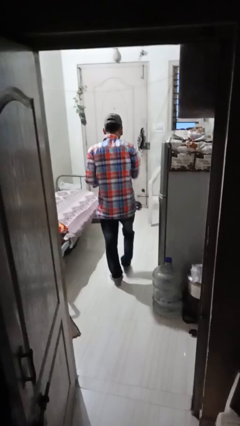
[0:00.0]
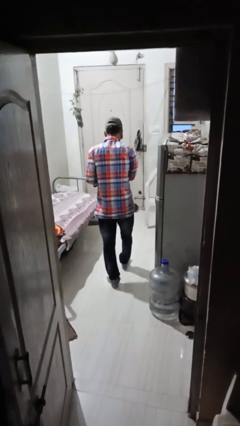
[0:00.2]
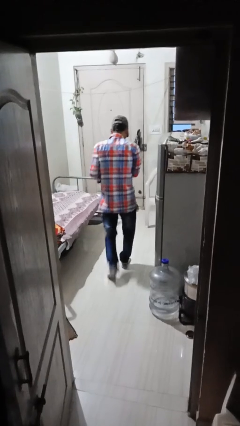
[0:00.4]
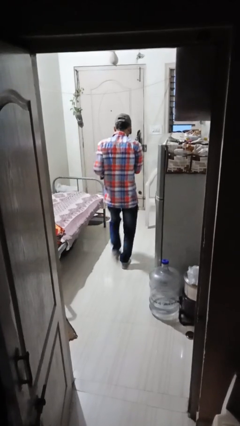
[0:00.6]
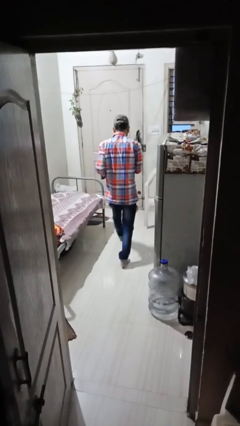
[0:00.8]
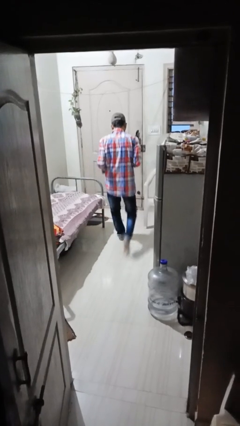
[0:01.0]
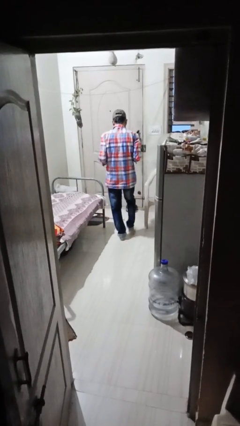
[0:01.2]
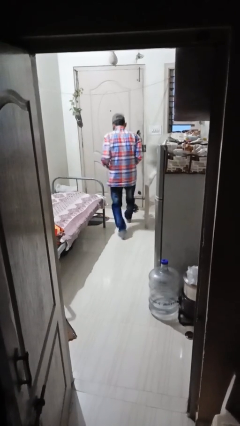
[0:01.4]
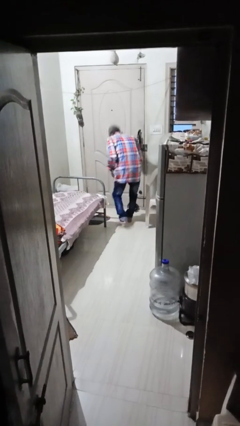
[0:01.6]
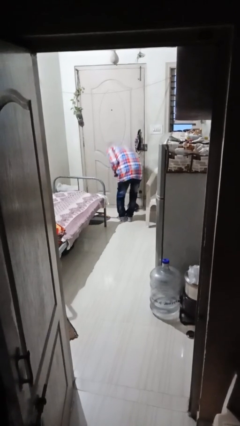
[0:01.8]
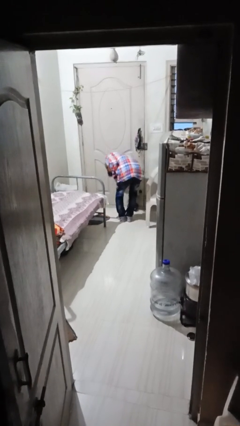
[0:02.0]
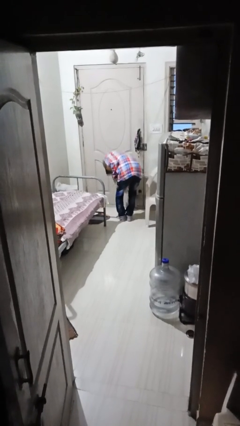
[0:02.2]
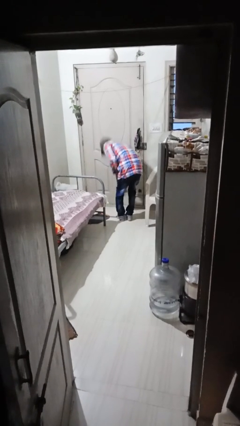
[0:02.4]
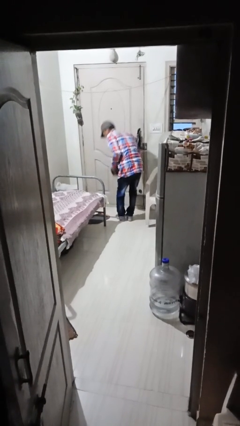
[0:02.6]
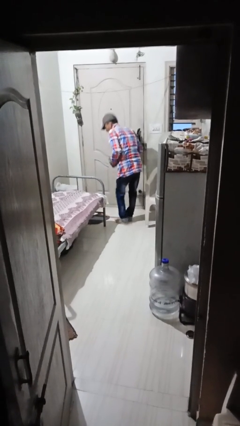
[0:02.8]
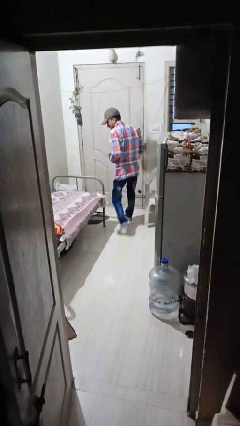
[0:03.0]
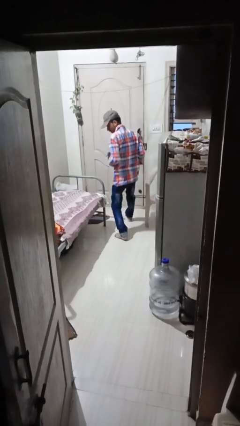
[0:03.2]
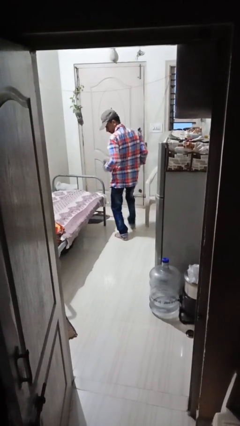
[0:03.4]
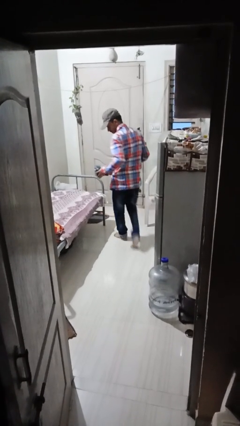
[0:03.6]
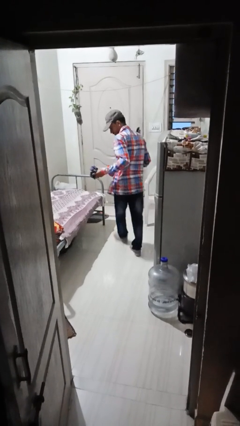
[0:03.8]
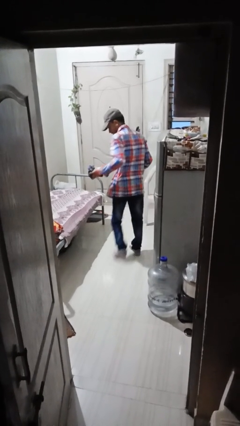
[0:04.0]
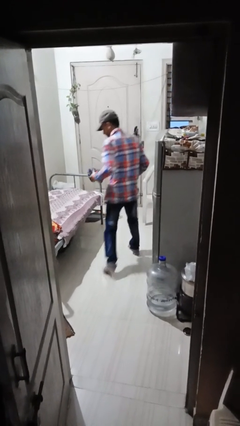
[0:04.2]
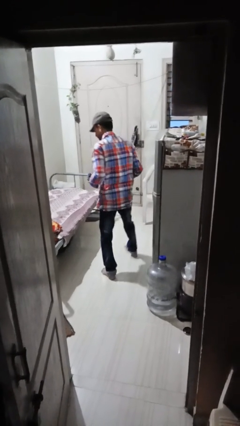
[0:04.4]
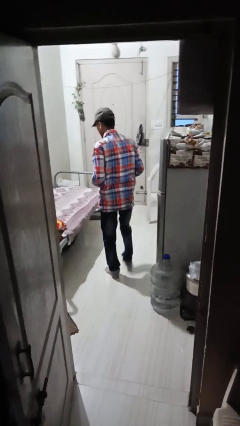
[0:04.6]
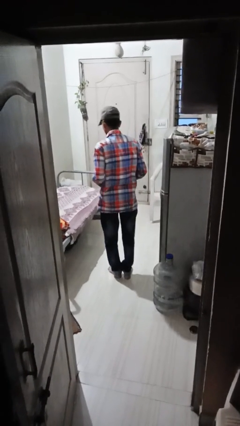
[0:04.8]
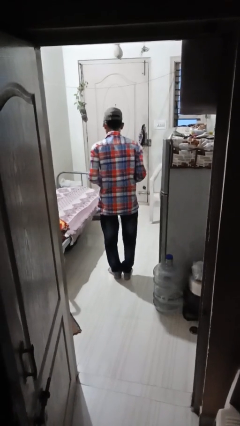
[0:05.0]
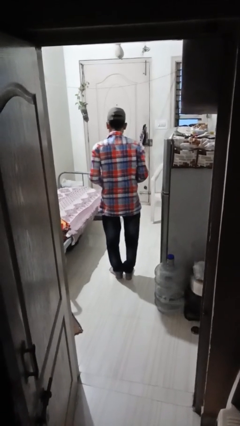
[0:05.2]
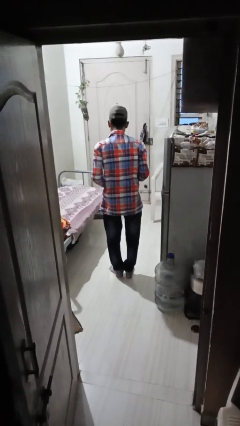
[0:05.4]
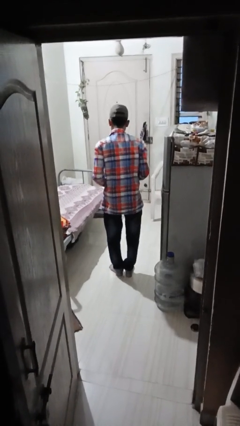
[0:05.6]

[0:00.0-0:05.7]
person picks up object from floor

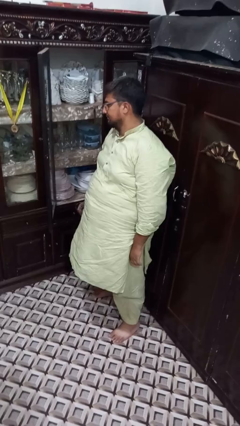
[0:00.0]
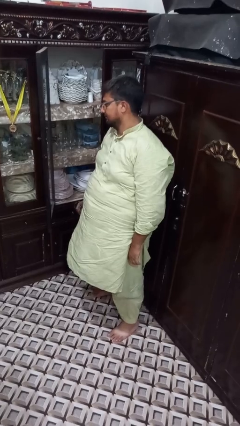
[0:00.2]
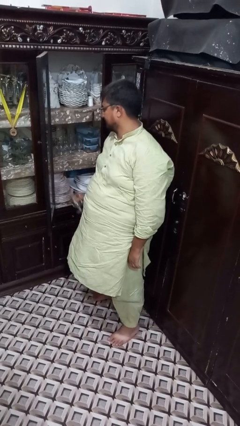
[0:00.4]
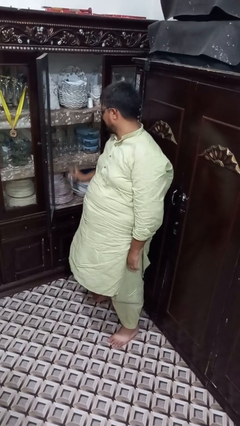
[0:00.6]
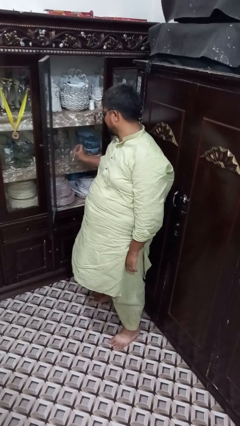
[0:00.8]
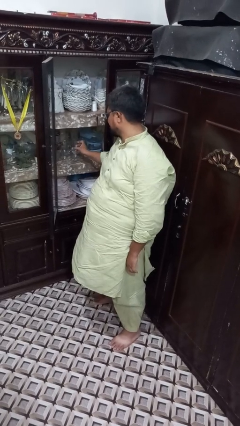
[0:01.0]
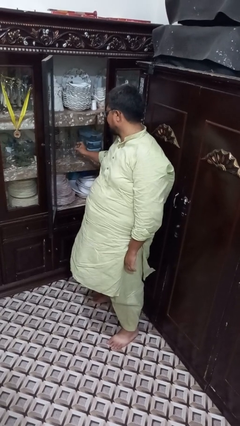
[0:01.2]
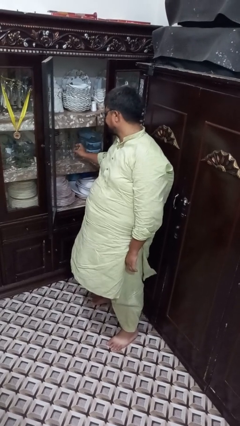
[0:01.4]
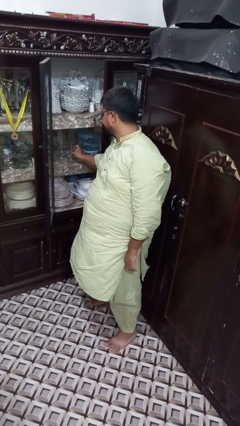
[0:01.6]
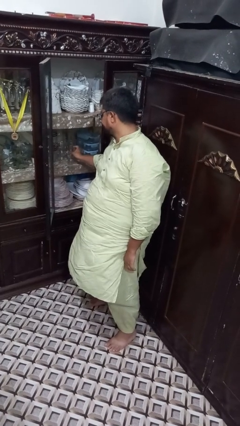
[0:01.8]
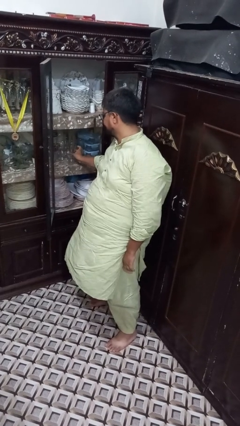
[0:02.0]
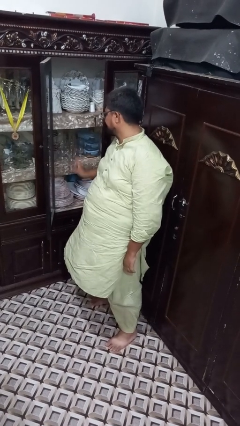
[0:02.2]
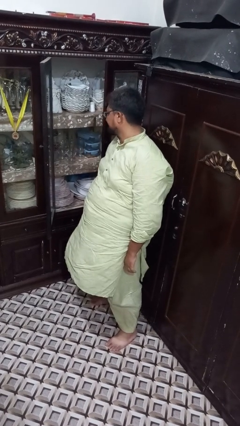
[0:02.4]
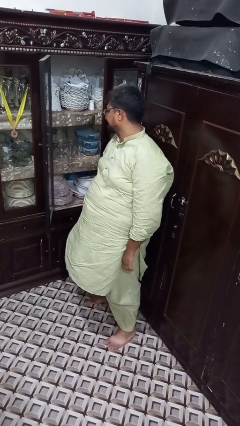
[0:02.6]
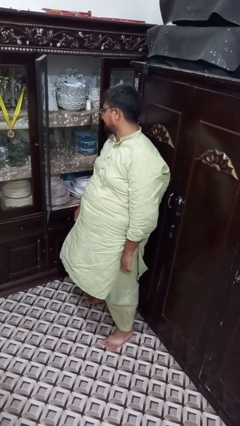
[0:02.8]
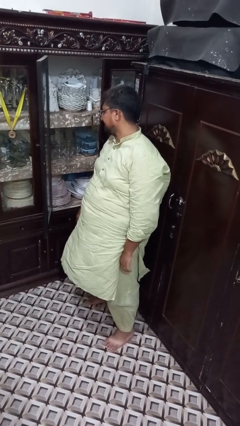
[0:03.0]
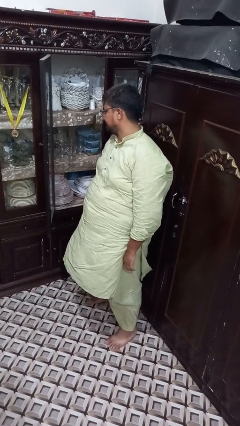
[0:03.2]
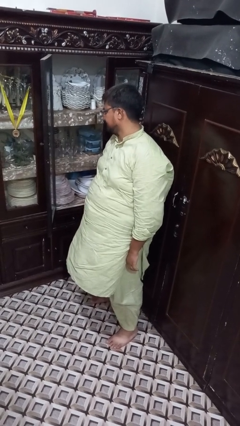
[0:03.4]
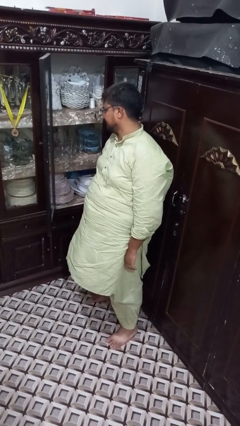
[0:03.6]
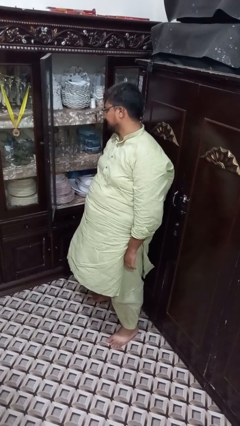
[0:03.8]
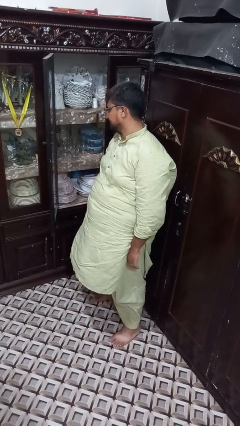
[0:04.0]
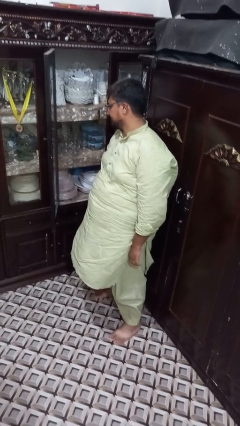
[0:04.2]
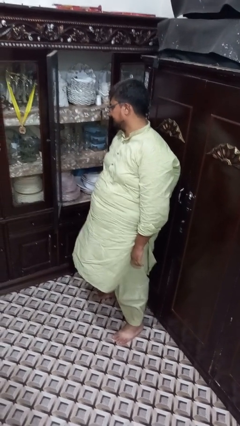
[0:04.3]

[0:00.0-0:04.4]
person puts down object on countertop

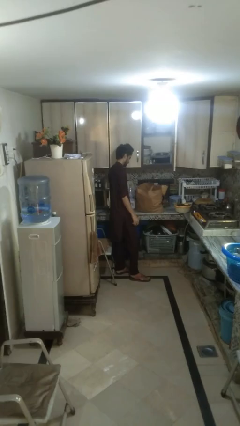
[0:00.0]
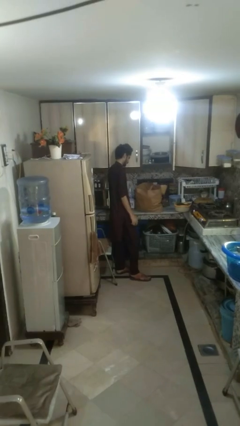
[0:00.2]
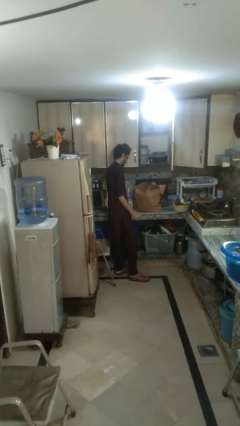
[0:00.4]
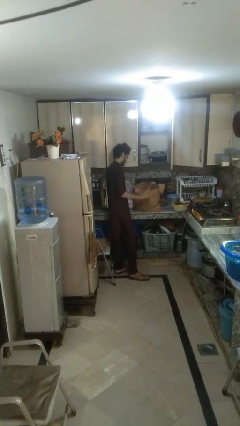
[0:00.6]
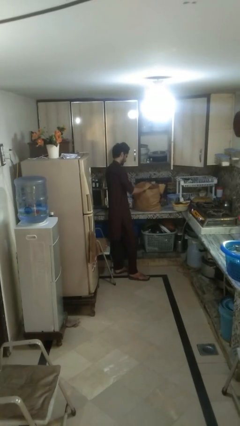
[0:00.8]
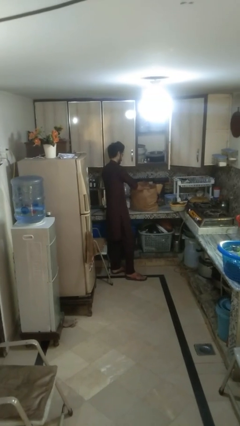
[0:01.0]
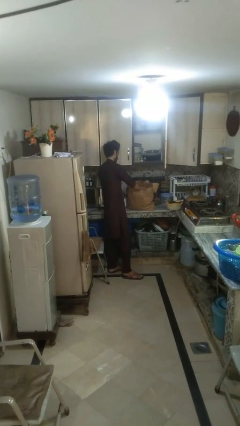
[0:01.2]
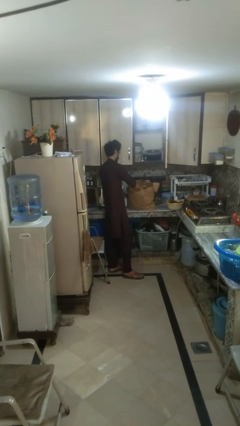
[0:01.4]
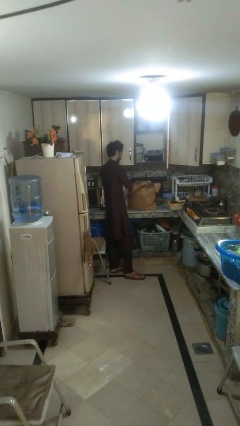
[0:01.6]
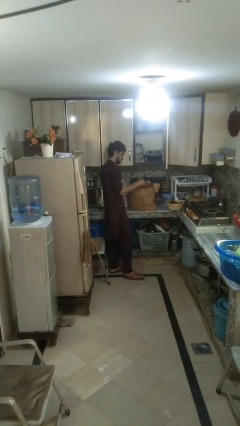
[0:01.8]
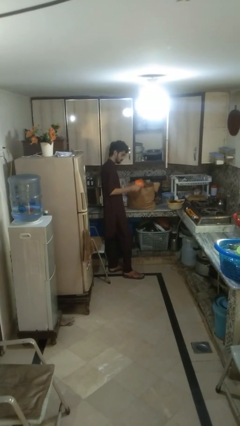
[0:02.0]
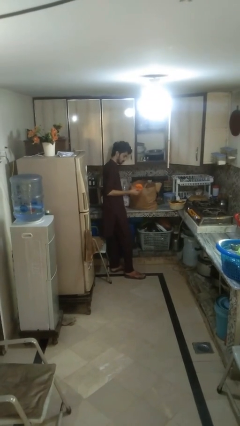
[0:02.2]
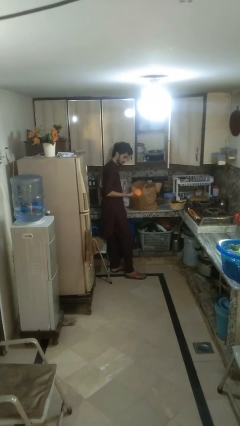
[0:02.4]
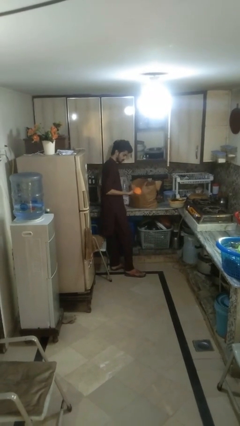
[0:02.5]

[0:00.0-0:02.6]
person takes object from bag

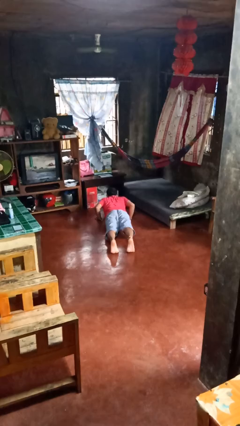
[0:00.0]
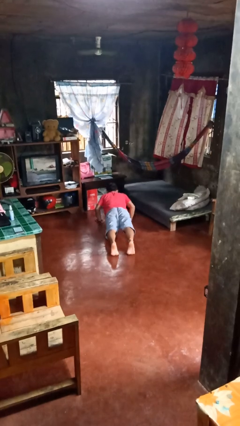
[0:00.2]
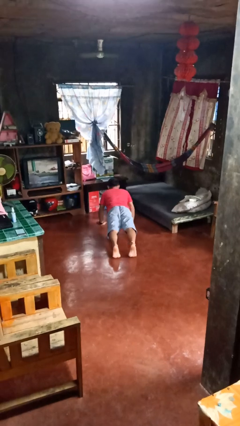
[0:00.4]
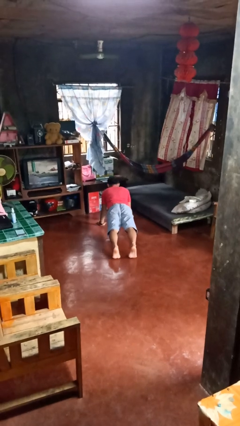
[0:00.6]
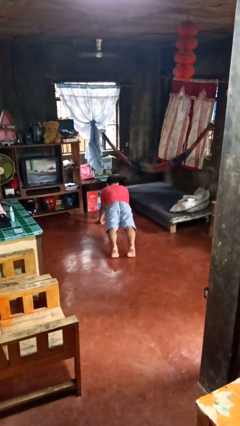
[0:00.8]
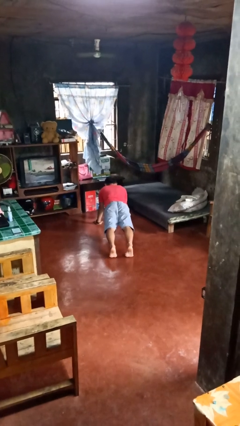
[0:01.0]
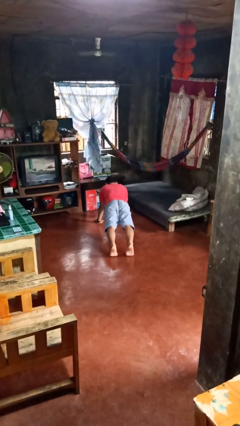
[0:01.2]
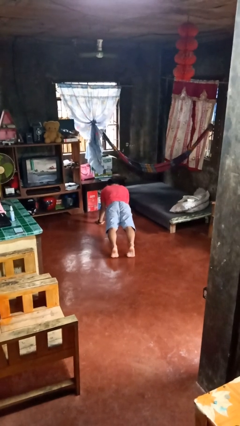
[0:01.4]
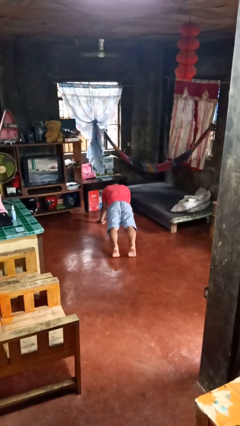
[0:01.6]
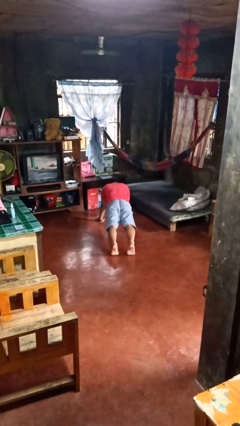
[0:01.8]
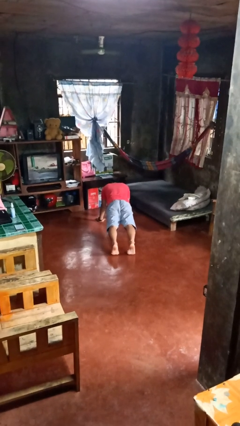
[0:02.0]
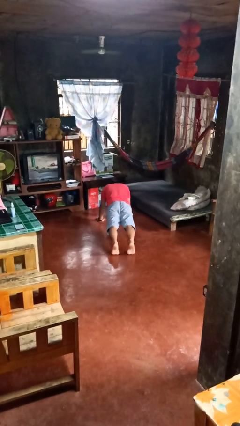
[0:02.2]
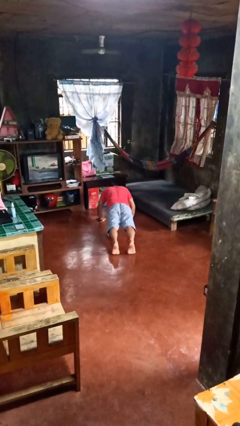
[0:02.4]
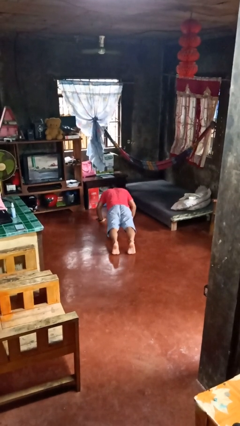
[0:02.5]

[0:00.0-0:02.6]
person exercises with pushup

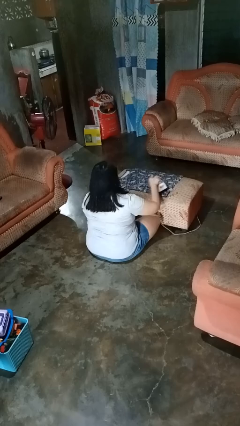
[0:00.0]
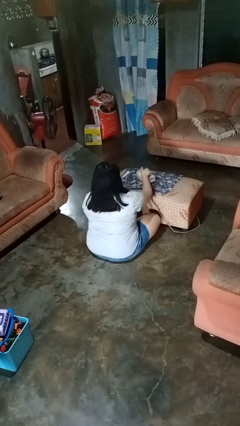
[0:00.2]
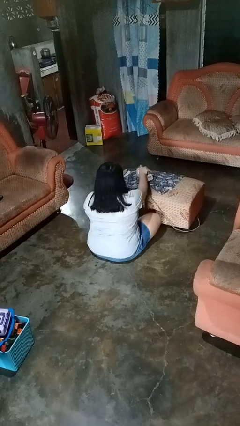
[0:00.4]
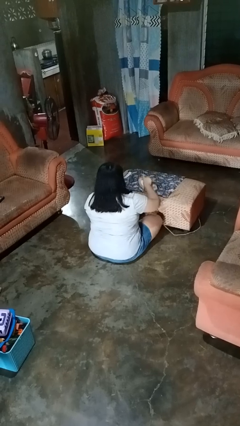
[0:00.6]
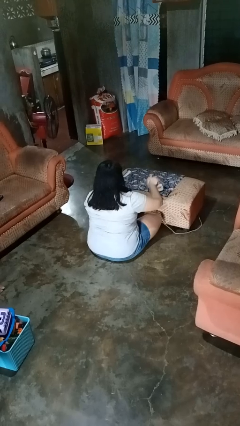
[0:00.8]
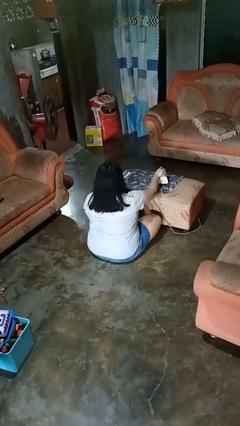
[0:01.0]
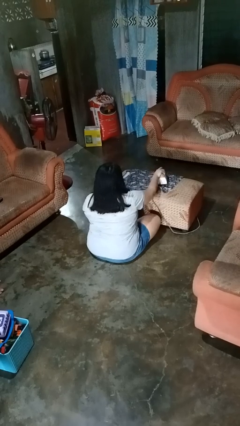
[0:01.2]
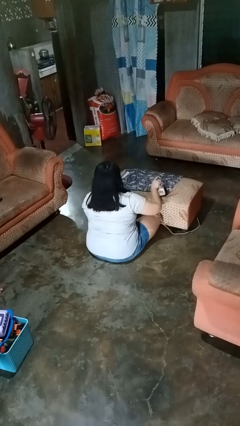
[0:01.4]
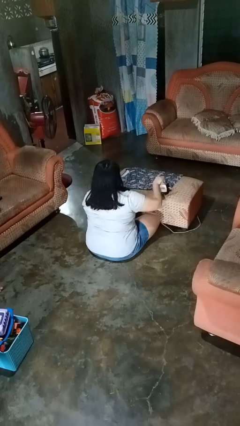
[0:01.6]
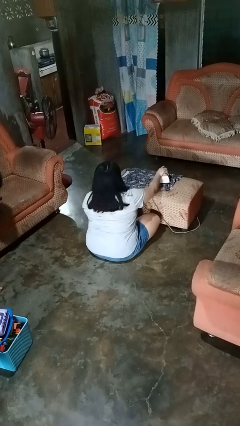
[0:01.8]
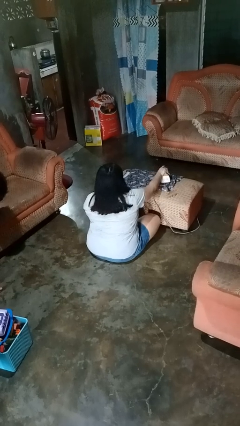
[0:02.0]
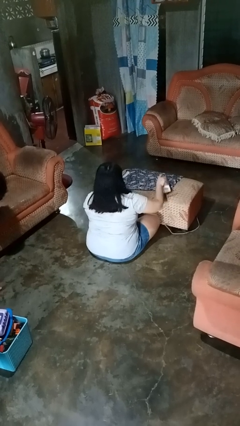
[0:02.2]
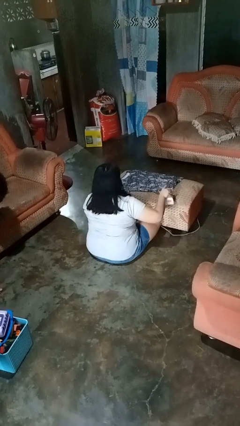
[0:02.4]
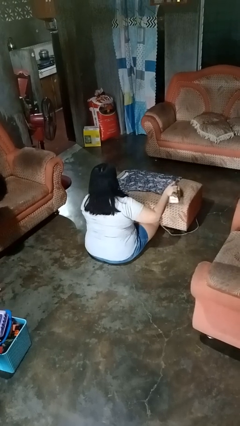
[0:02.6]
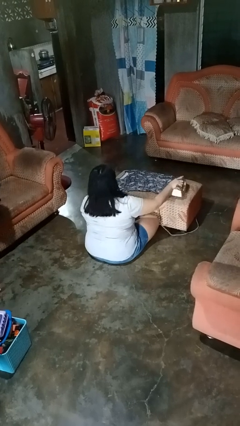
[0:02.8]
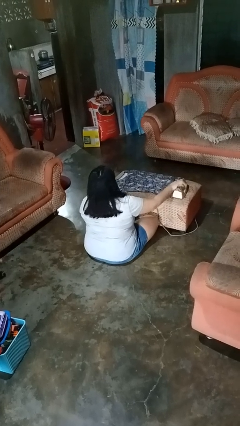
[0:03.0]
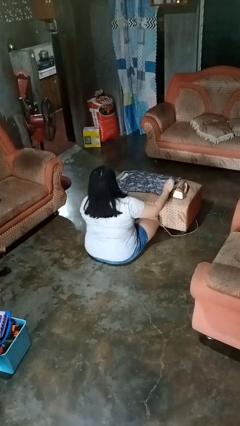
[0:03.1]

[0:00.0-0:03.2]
person irons clothes
